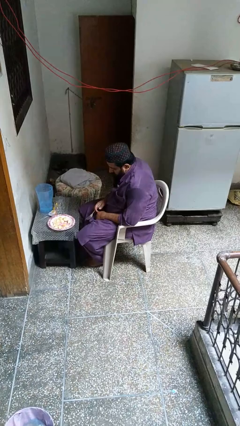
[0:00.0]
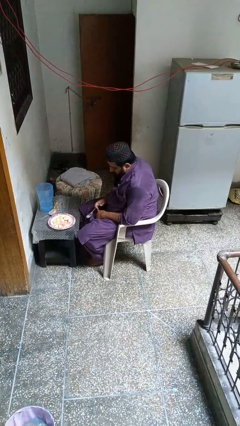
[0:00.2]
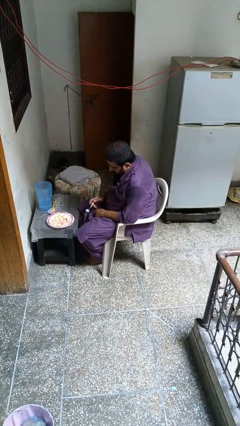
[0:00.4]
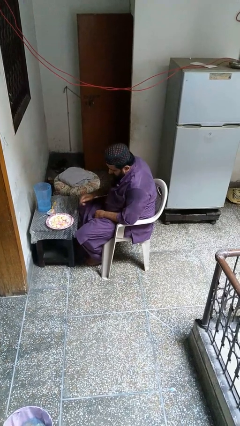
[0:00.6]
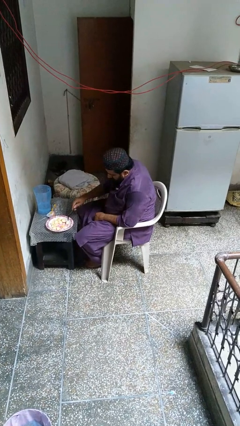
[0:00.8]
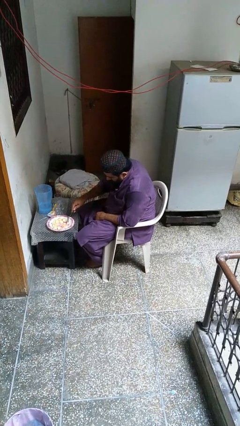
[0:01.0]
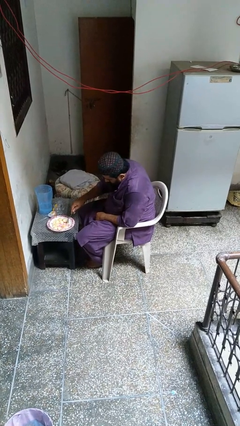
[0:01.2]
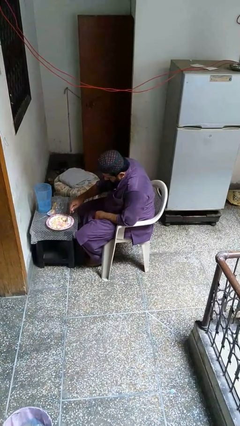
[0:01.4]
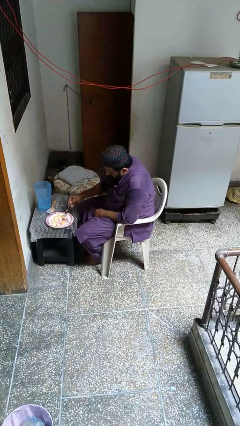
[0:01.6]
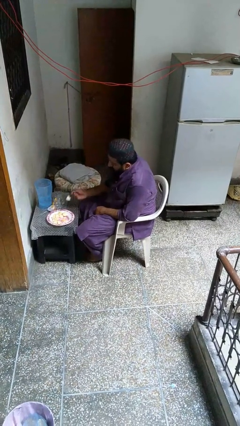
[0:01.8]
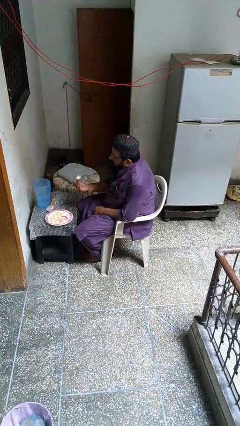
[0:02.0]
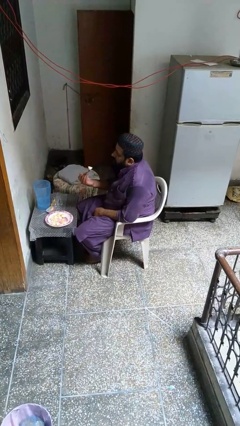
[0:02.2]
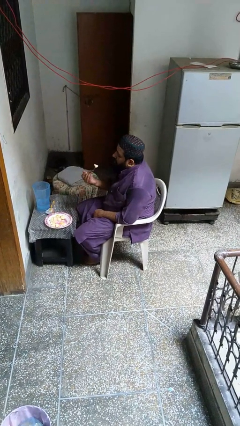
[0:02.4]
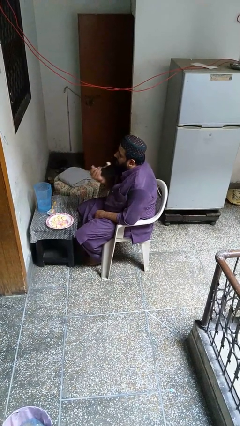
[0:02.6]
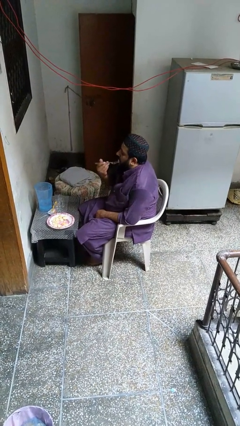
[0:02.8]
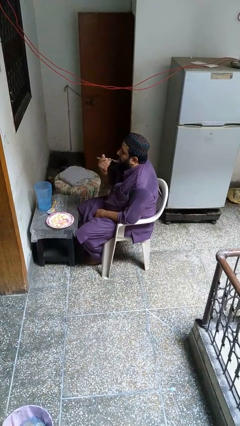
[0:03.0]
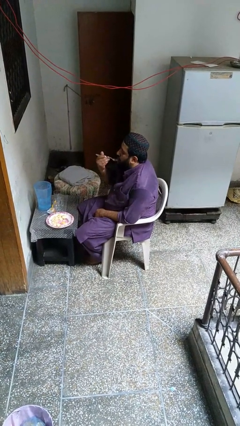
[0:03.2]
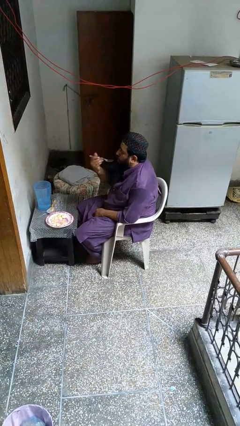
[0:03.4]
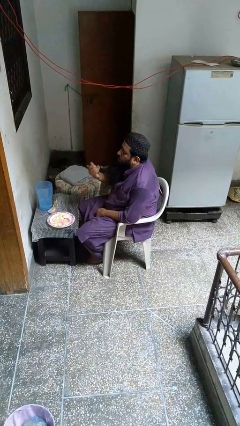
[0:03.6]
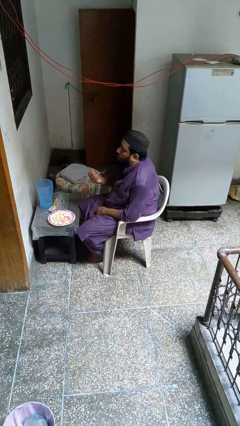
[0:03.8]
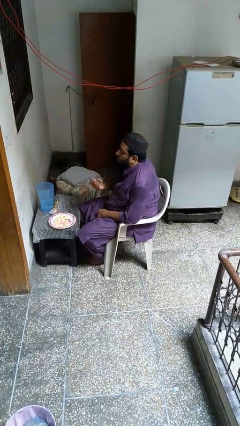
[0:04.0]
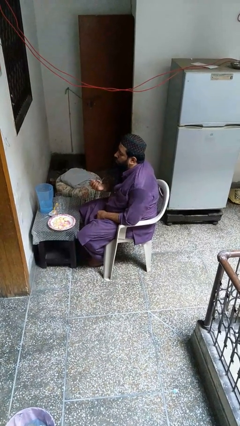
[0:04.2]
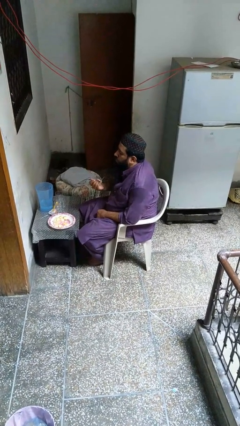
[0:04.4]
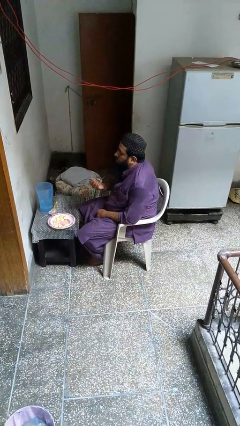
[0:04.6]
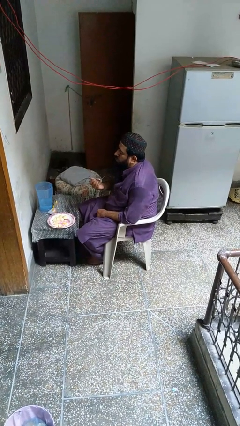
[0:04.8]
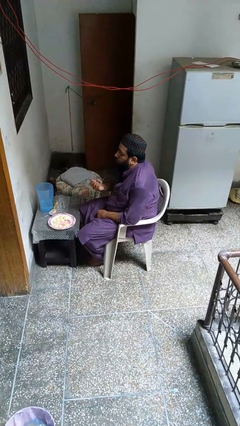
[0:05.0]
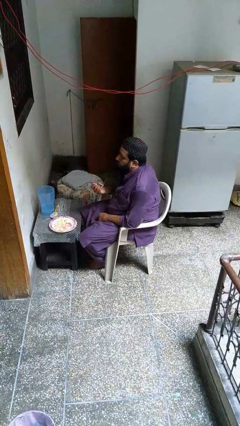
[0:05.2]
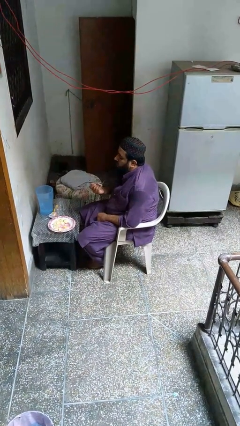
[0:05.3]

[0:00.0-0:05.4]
person eats with utensil

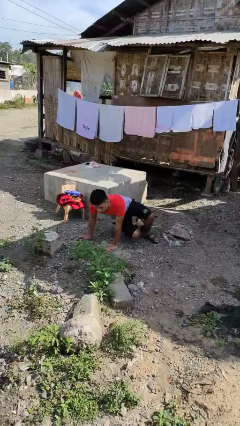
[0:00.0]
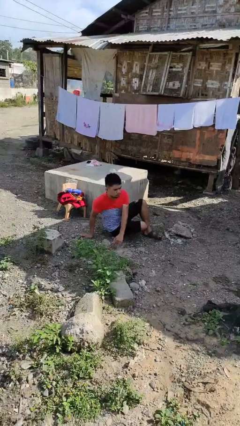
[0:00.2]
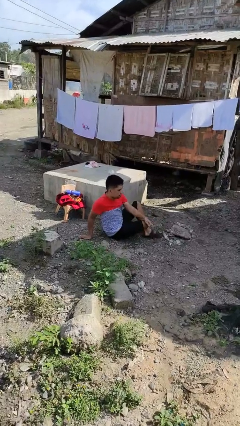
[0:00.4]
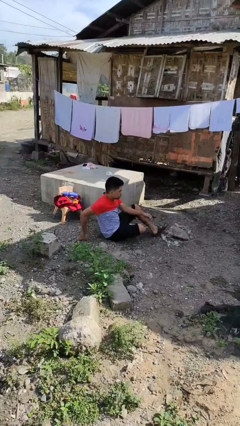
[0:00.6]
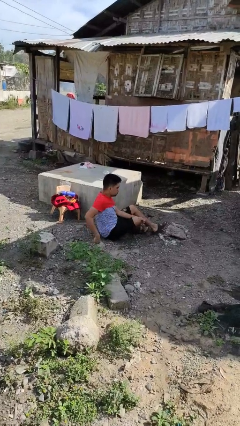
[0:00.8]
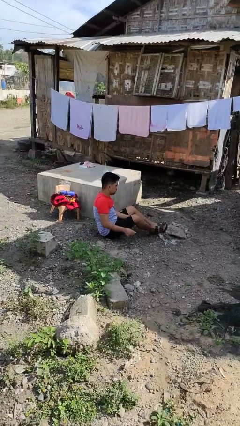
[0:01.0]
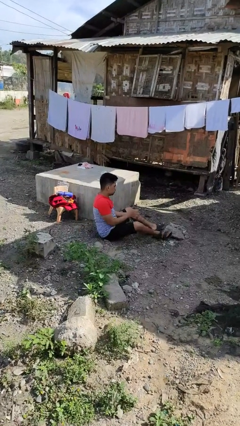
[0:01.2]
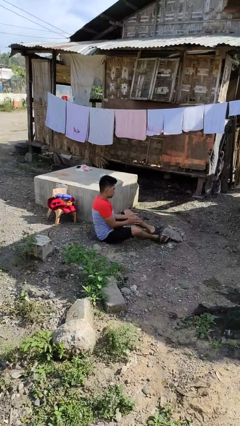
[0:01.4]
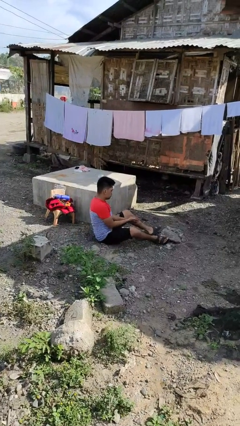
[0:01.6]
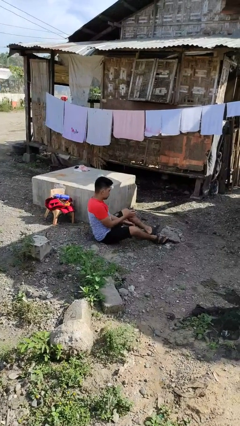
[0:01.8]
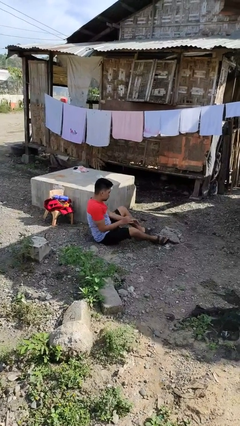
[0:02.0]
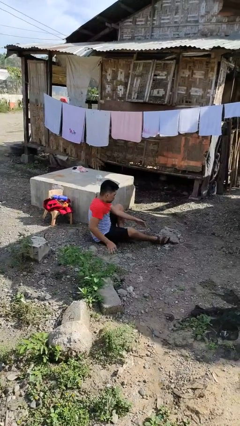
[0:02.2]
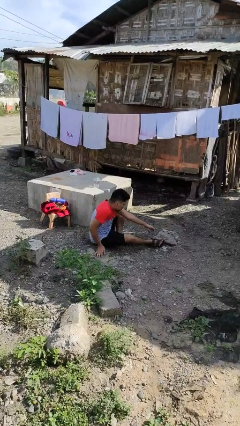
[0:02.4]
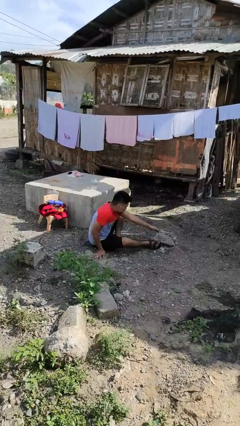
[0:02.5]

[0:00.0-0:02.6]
person lies down on floor

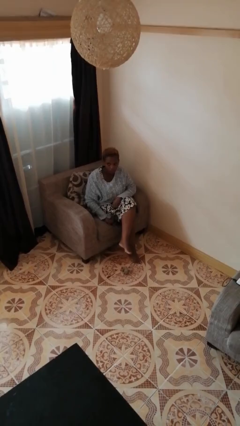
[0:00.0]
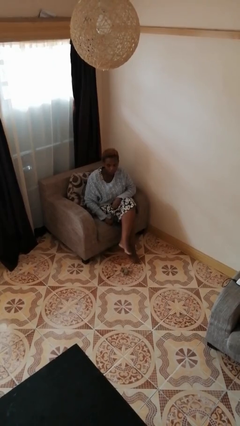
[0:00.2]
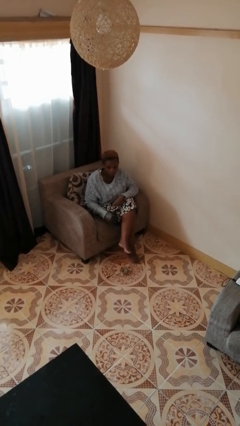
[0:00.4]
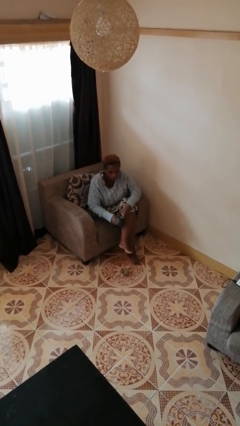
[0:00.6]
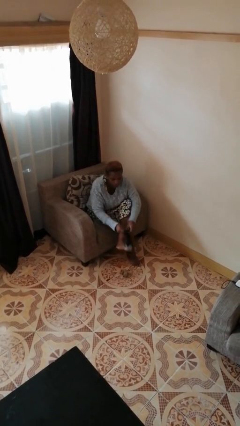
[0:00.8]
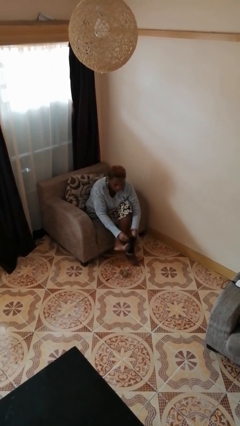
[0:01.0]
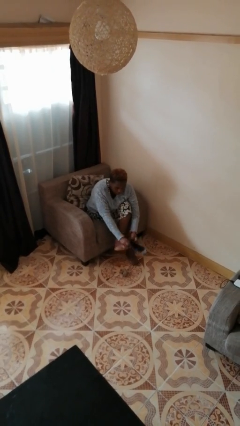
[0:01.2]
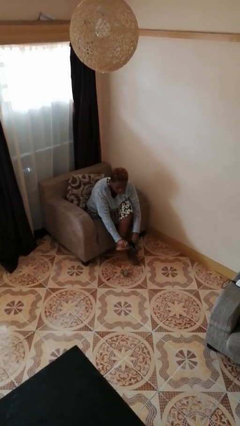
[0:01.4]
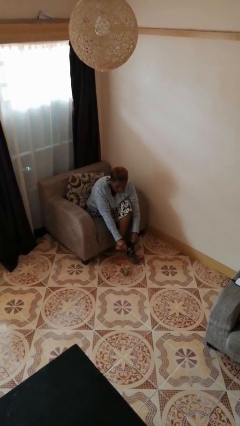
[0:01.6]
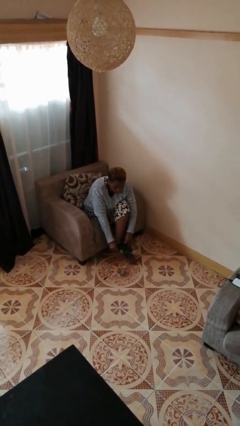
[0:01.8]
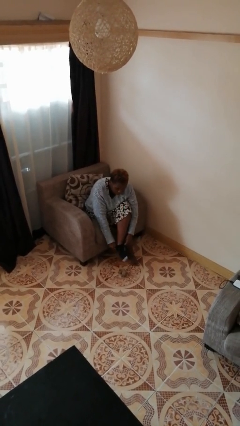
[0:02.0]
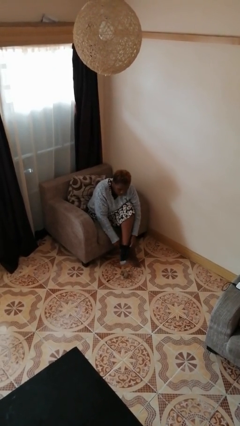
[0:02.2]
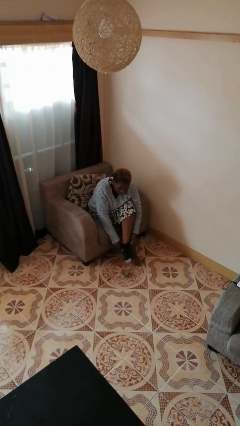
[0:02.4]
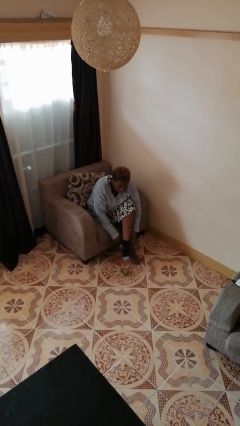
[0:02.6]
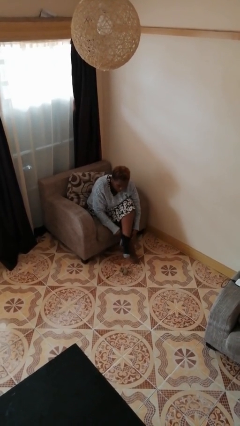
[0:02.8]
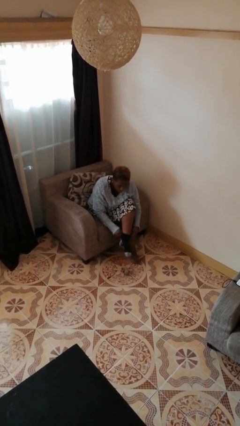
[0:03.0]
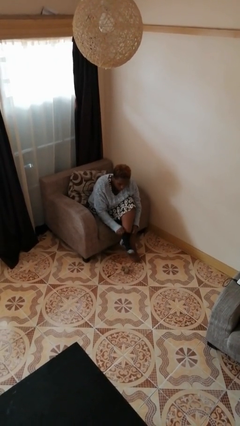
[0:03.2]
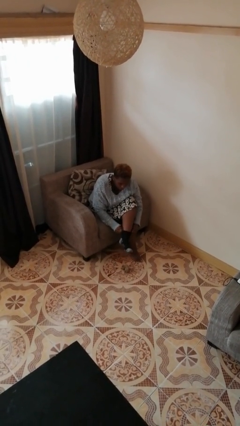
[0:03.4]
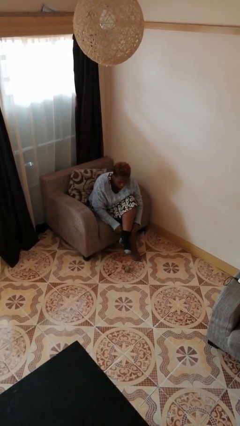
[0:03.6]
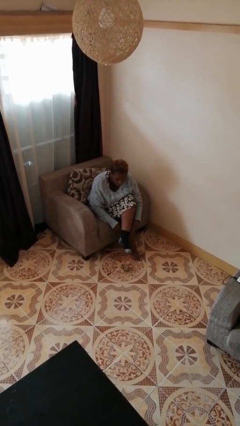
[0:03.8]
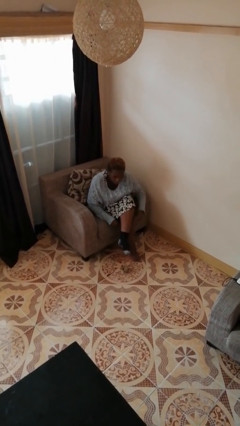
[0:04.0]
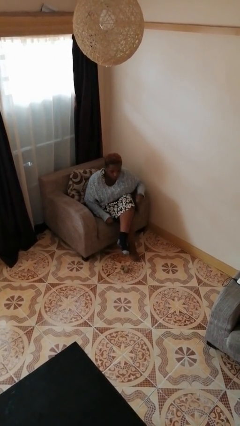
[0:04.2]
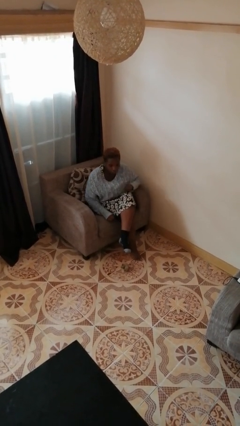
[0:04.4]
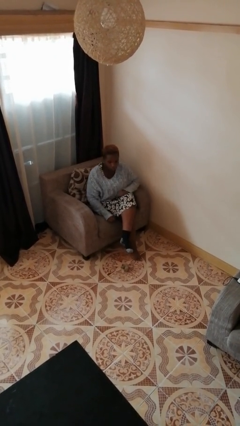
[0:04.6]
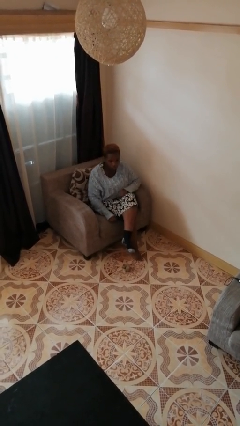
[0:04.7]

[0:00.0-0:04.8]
person puts on socks

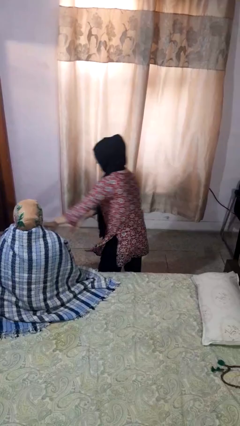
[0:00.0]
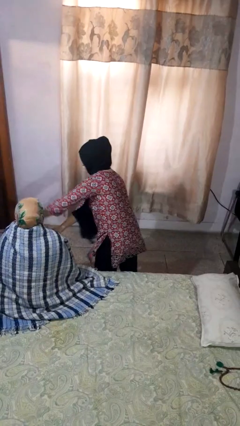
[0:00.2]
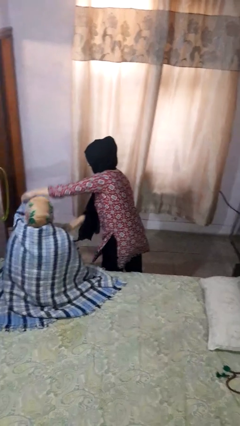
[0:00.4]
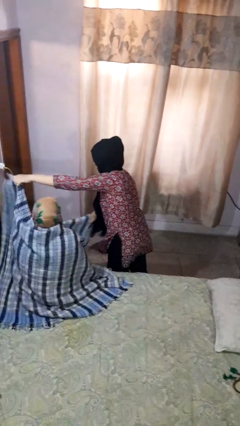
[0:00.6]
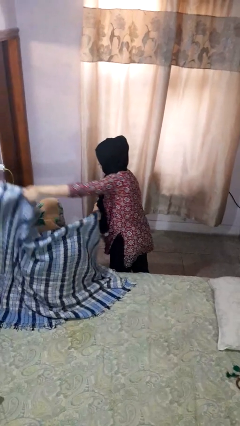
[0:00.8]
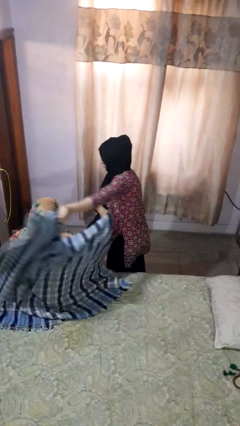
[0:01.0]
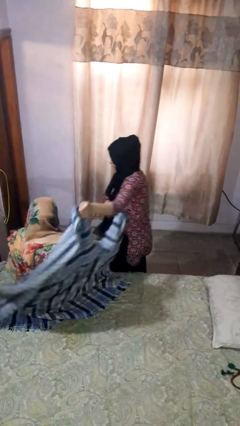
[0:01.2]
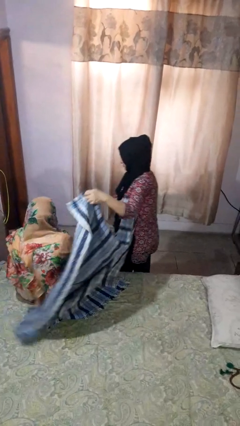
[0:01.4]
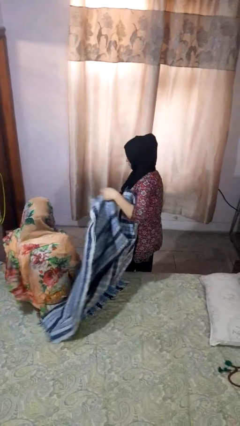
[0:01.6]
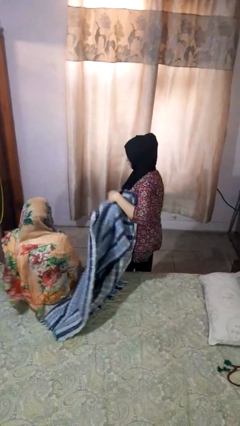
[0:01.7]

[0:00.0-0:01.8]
person uncovers friend with blanket

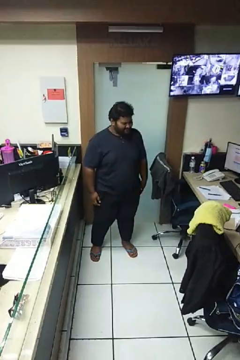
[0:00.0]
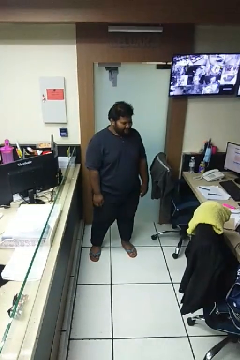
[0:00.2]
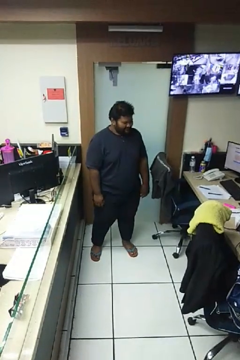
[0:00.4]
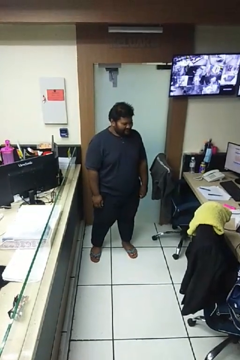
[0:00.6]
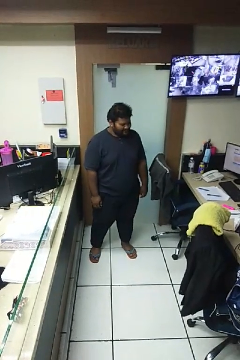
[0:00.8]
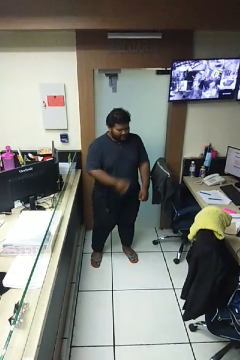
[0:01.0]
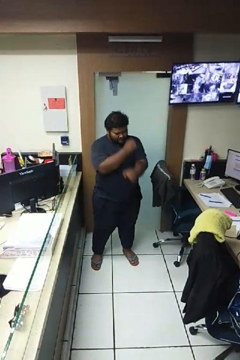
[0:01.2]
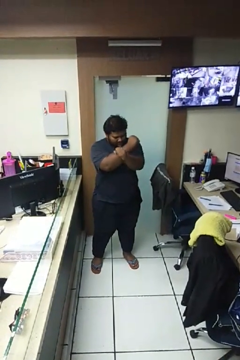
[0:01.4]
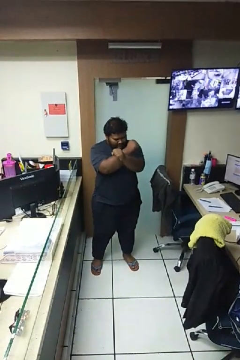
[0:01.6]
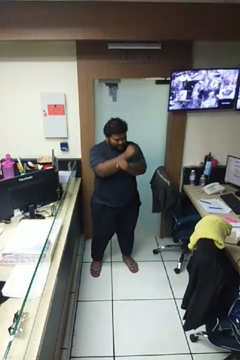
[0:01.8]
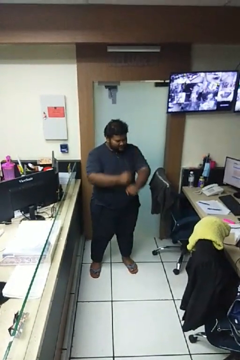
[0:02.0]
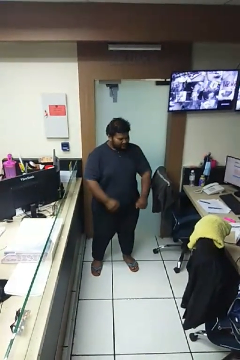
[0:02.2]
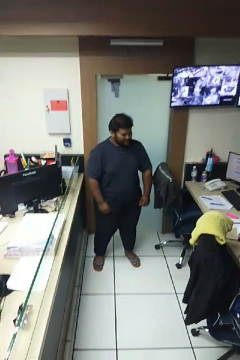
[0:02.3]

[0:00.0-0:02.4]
person gestures arms x

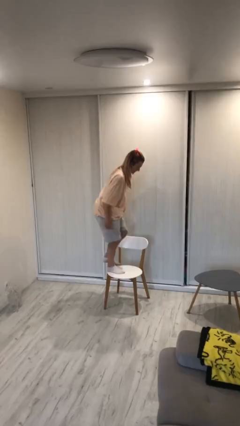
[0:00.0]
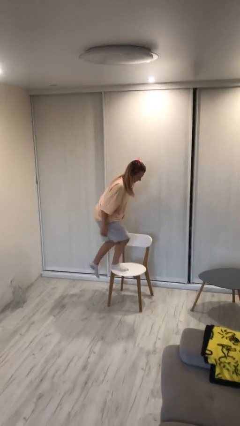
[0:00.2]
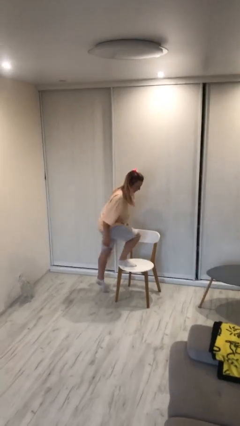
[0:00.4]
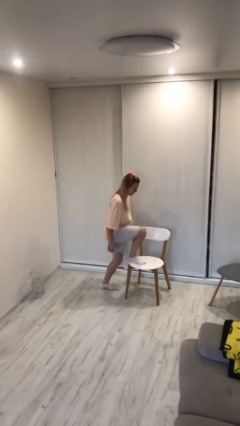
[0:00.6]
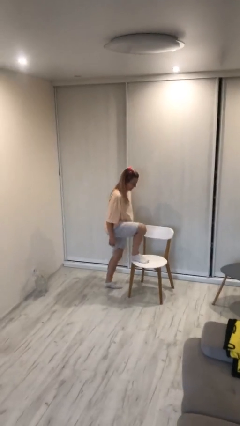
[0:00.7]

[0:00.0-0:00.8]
person climbs off chair
